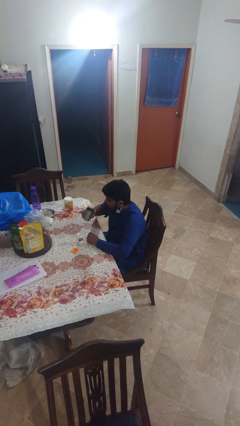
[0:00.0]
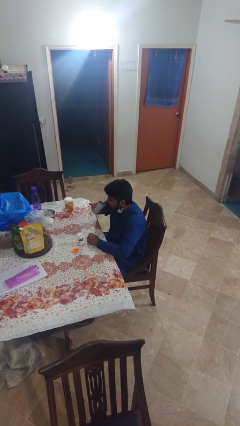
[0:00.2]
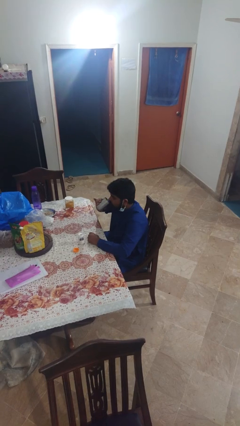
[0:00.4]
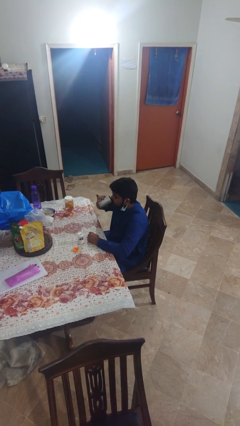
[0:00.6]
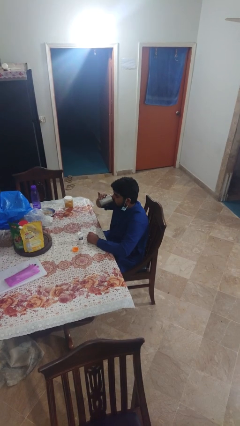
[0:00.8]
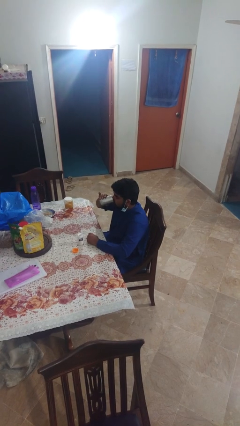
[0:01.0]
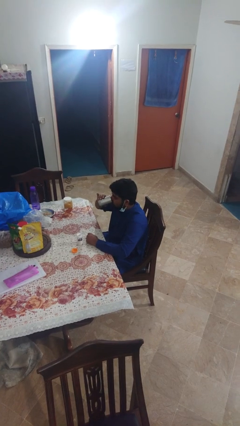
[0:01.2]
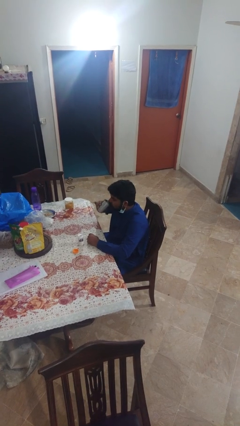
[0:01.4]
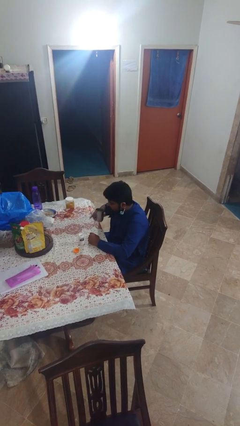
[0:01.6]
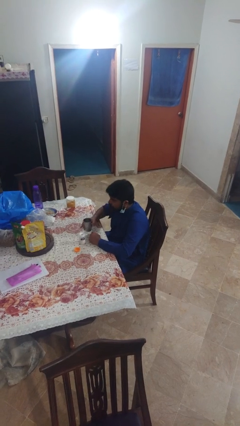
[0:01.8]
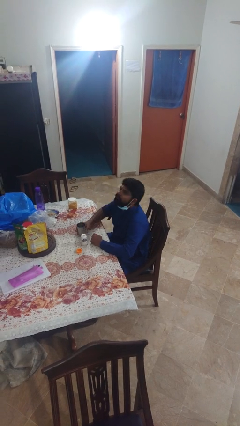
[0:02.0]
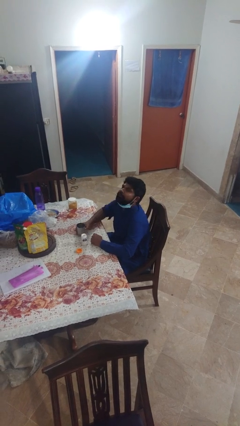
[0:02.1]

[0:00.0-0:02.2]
person drinks from cup

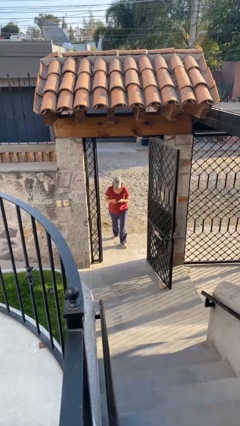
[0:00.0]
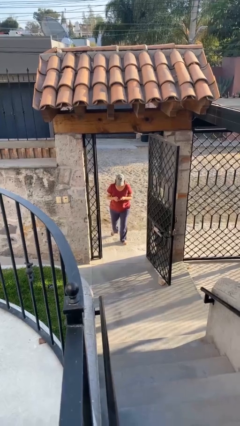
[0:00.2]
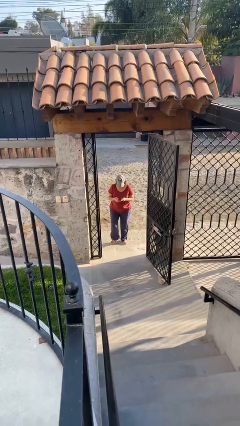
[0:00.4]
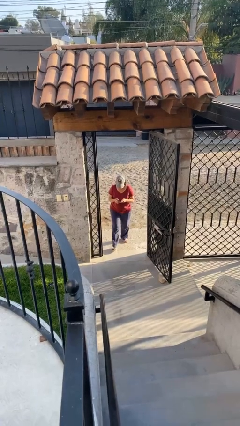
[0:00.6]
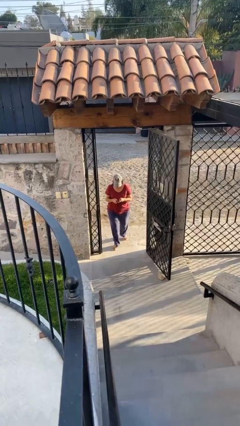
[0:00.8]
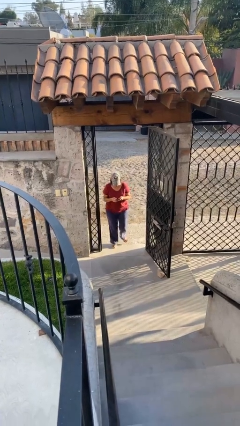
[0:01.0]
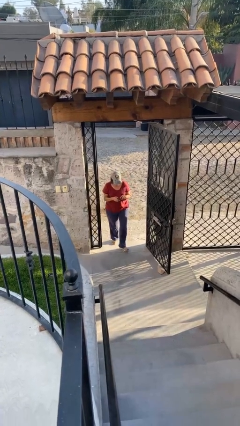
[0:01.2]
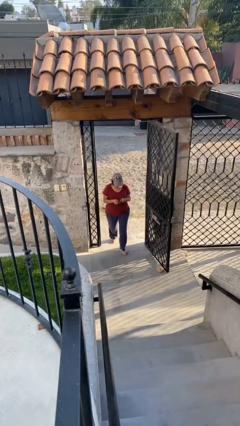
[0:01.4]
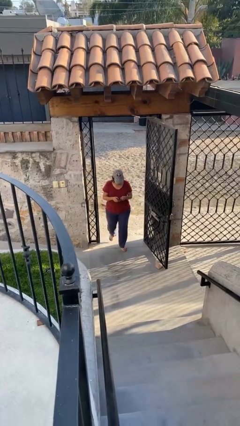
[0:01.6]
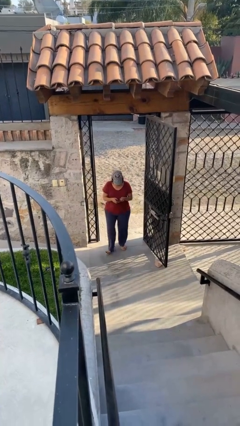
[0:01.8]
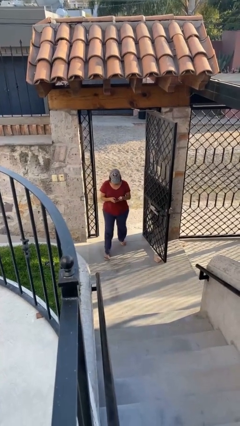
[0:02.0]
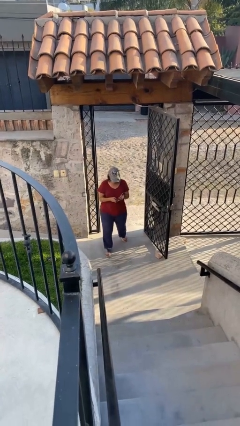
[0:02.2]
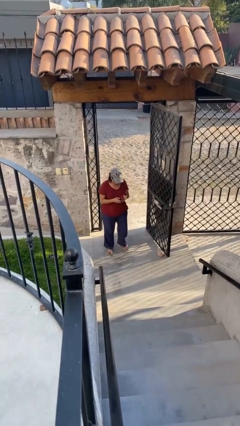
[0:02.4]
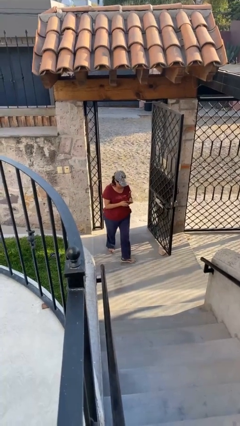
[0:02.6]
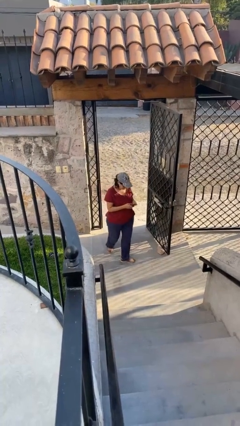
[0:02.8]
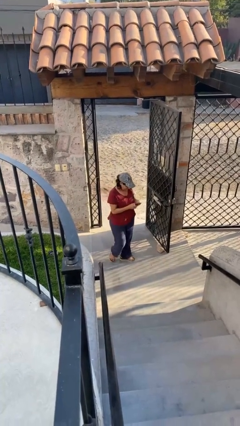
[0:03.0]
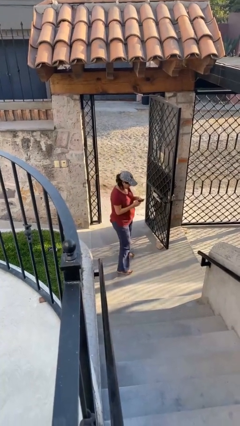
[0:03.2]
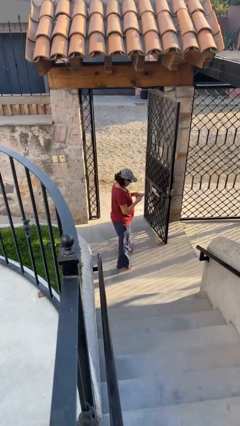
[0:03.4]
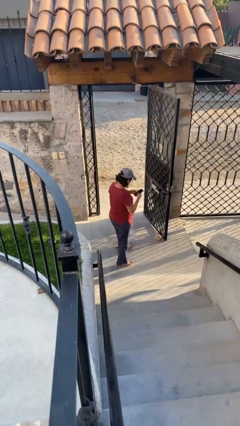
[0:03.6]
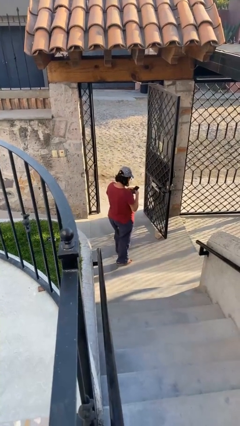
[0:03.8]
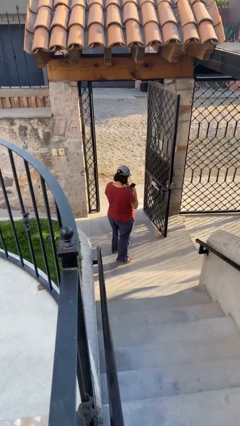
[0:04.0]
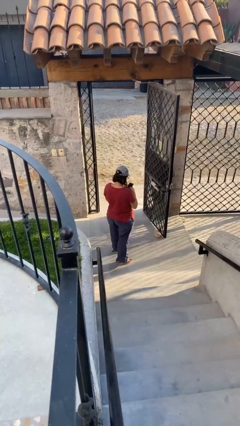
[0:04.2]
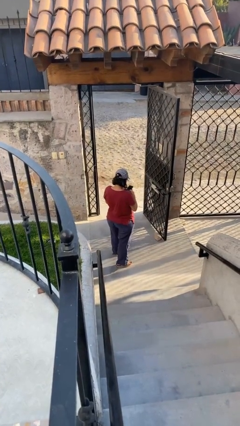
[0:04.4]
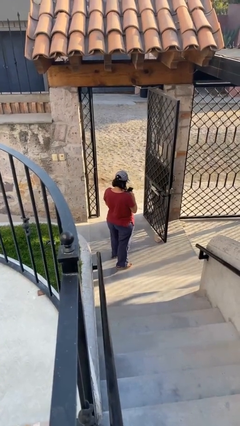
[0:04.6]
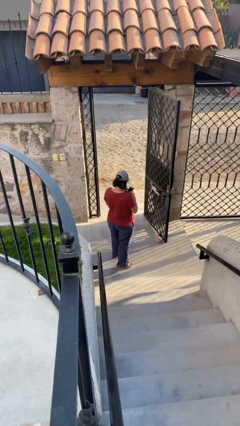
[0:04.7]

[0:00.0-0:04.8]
person enters scene through structure

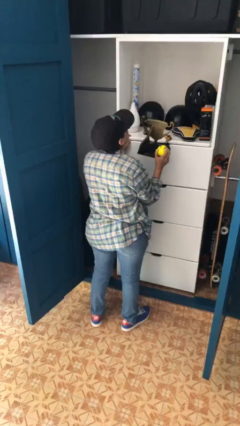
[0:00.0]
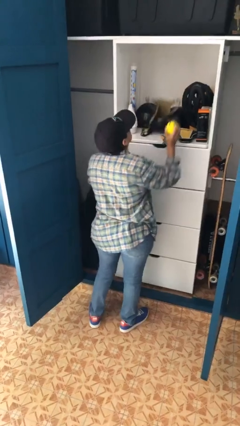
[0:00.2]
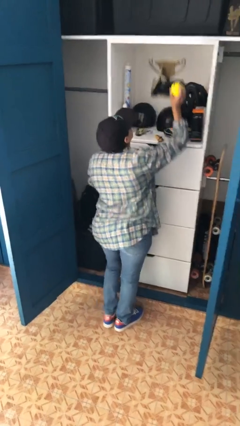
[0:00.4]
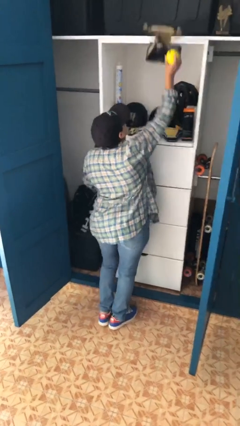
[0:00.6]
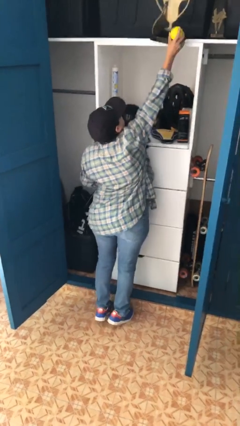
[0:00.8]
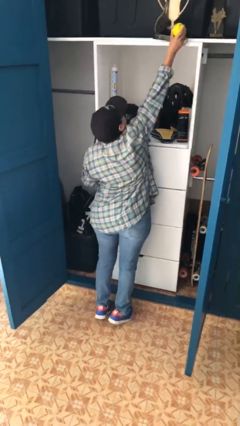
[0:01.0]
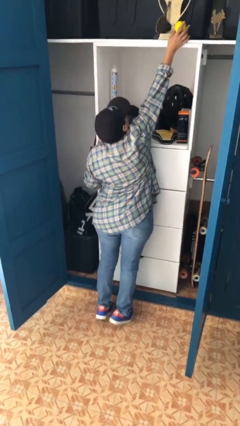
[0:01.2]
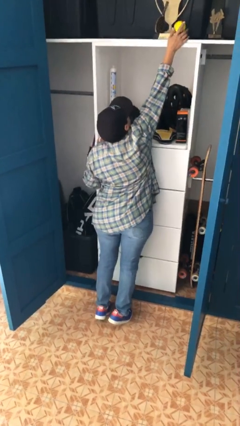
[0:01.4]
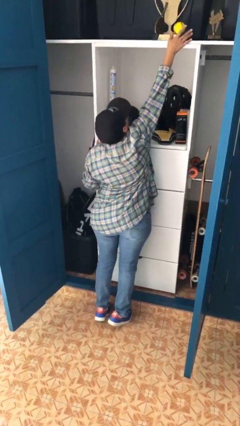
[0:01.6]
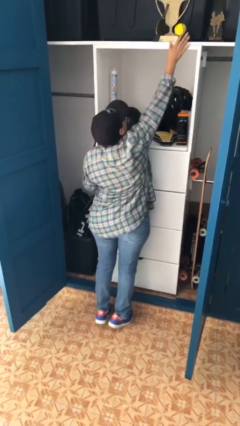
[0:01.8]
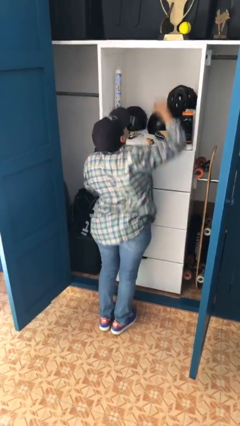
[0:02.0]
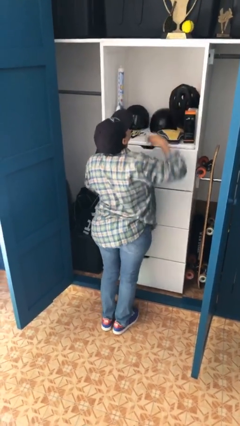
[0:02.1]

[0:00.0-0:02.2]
person puts down object on shelf

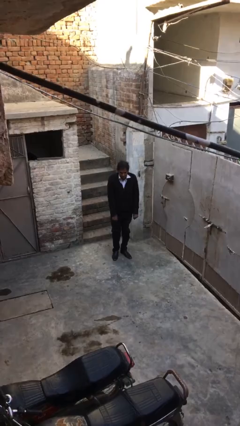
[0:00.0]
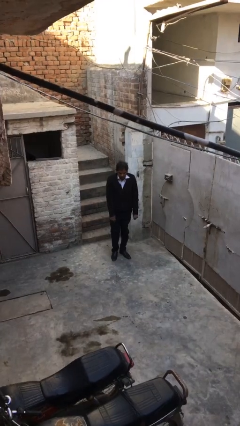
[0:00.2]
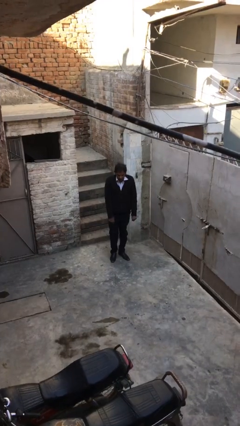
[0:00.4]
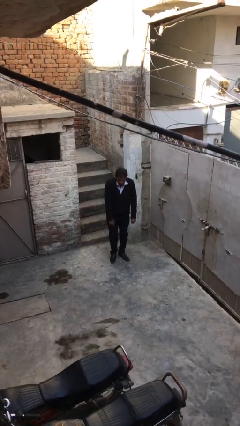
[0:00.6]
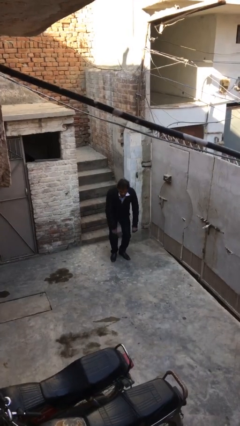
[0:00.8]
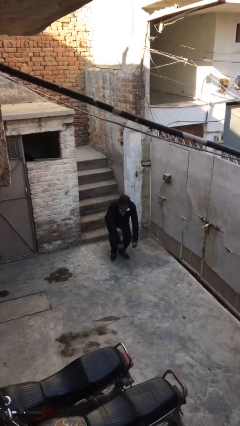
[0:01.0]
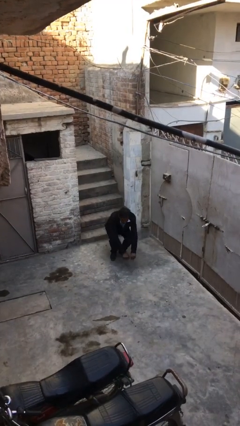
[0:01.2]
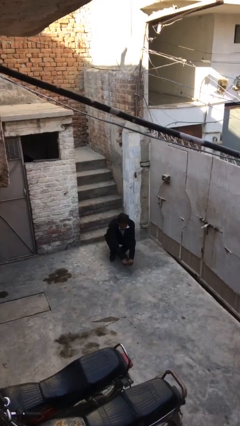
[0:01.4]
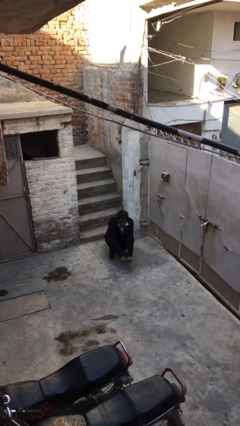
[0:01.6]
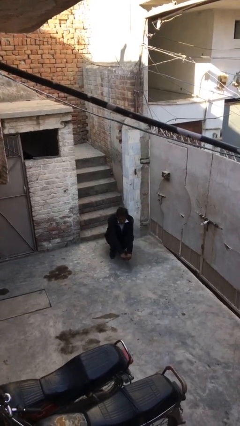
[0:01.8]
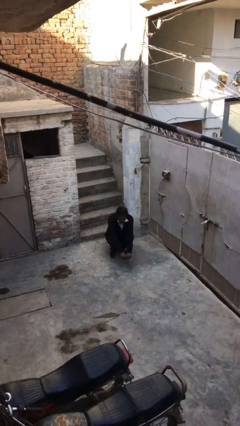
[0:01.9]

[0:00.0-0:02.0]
person sits down

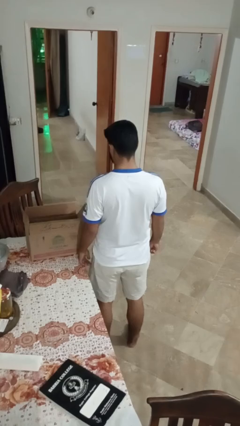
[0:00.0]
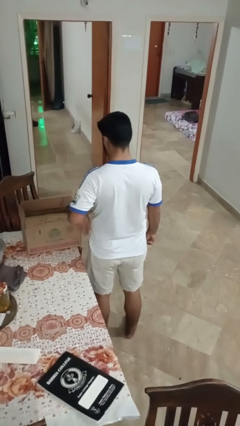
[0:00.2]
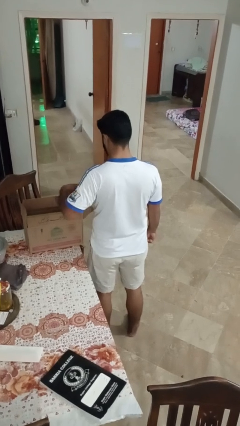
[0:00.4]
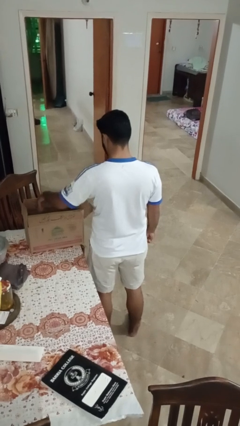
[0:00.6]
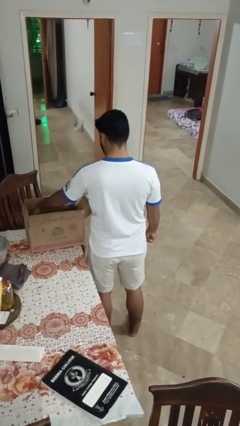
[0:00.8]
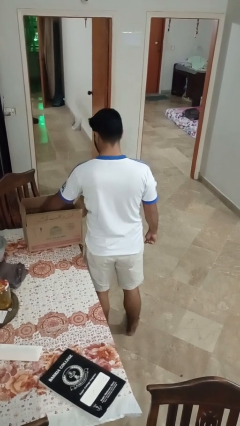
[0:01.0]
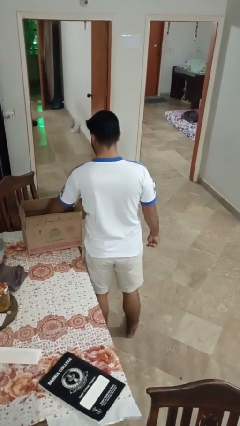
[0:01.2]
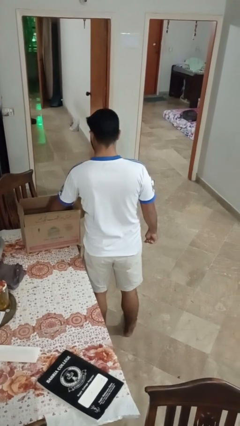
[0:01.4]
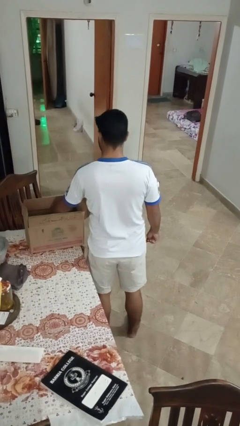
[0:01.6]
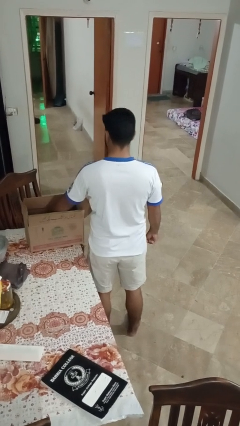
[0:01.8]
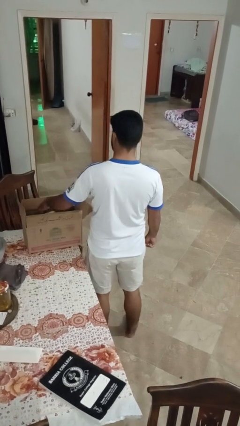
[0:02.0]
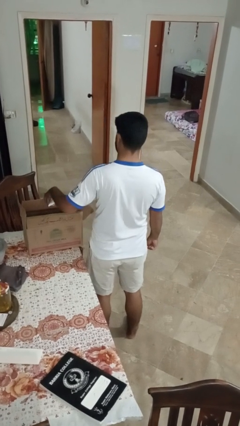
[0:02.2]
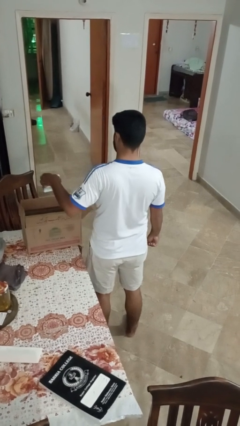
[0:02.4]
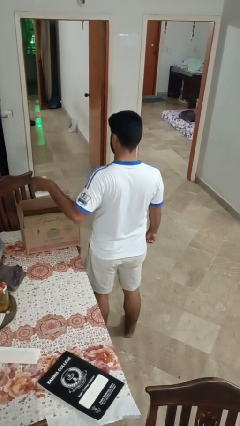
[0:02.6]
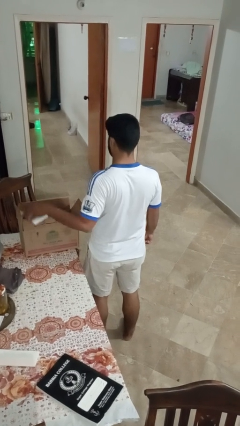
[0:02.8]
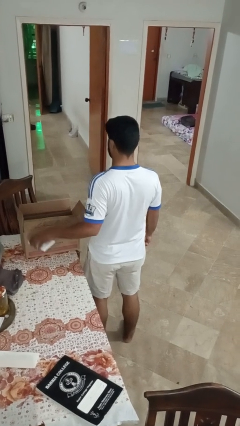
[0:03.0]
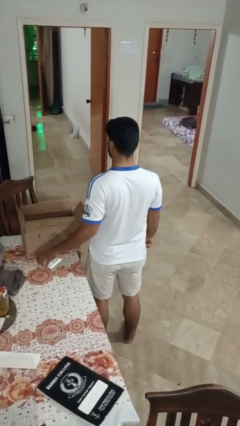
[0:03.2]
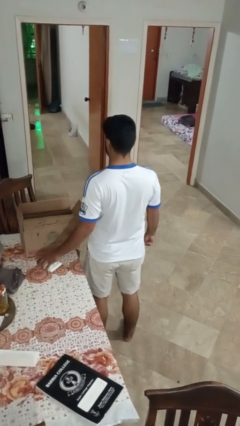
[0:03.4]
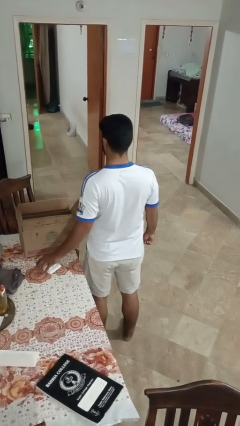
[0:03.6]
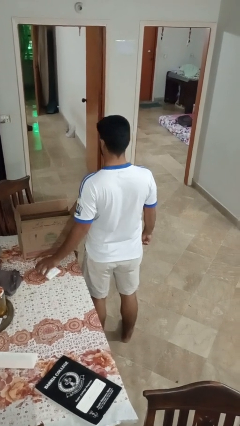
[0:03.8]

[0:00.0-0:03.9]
person takes object from box

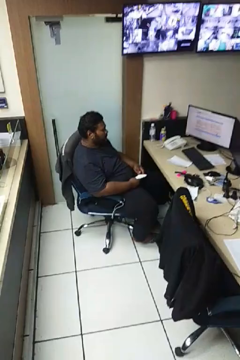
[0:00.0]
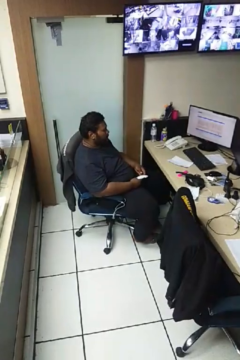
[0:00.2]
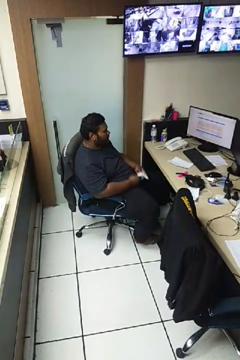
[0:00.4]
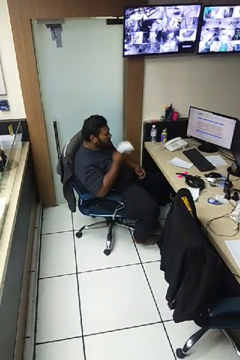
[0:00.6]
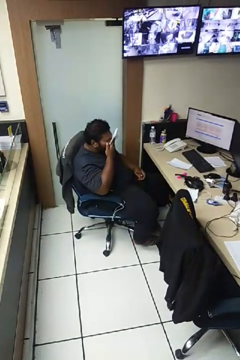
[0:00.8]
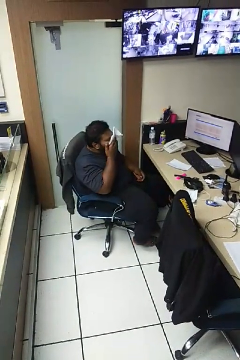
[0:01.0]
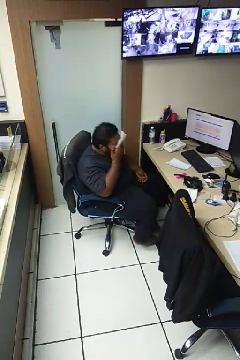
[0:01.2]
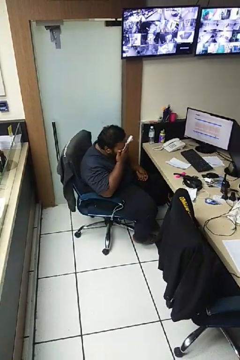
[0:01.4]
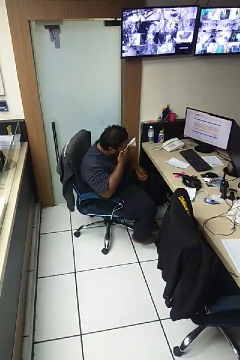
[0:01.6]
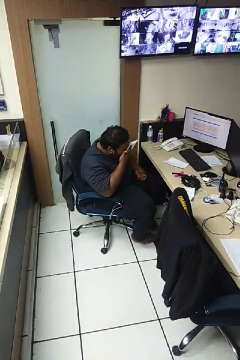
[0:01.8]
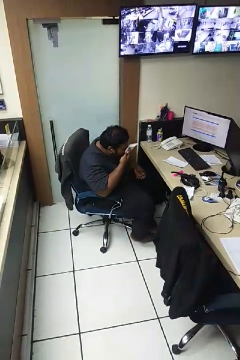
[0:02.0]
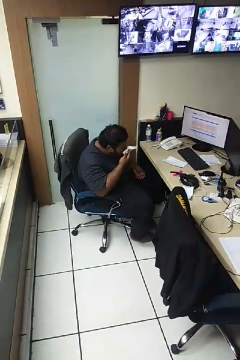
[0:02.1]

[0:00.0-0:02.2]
person blows nose

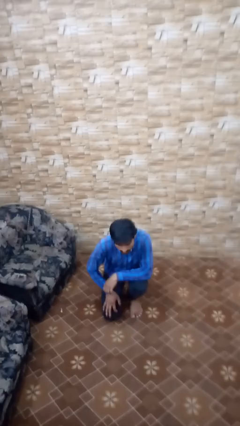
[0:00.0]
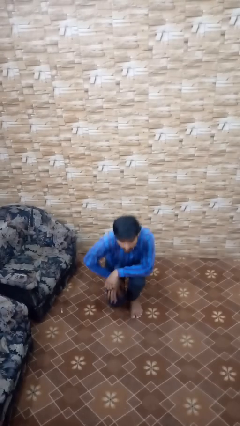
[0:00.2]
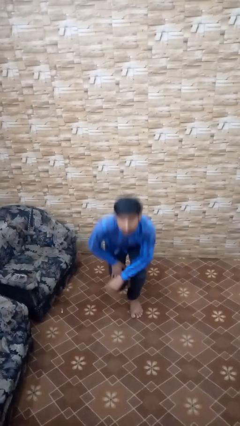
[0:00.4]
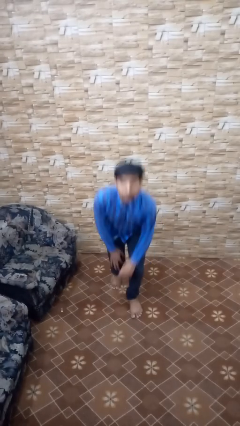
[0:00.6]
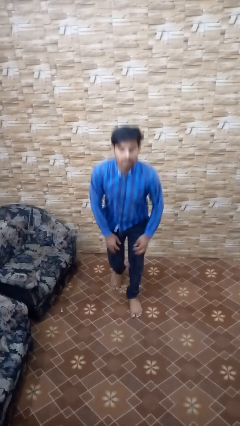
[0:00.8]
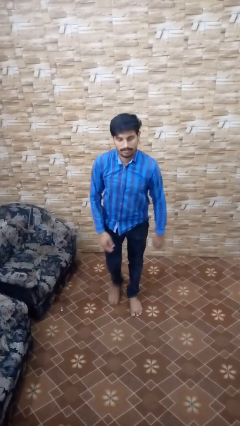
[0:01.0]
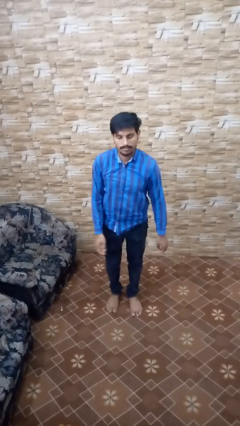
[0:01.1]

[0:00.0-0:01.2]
person stands up from floor
